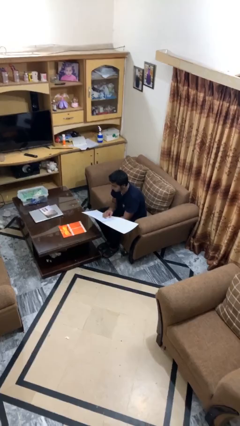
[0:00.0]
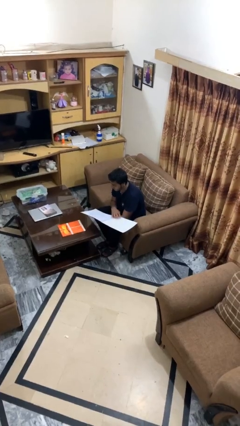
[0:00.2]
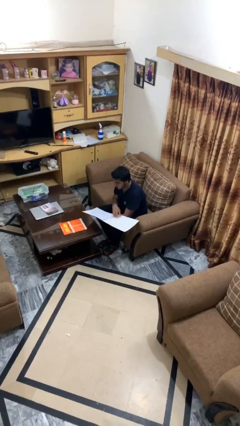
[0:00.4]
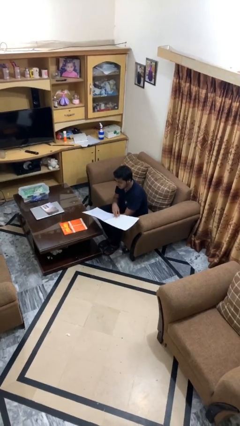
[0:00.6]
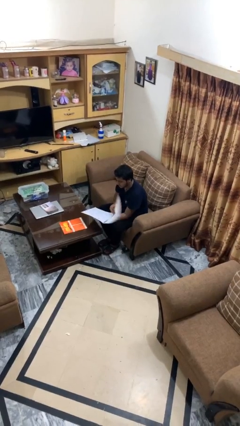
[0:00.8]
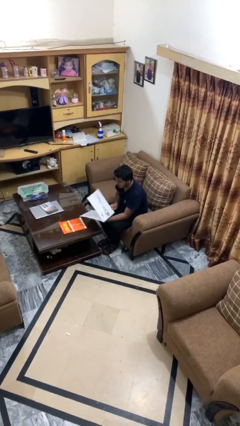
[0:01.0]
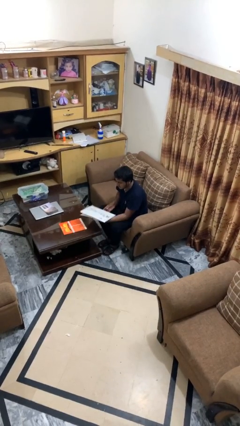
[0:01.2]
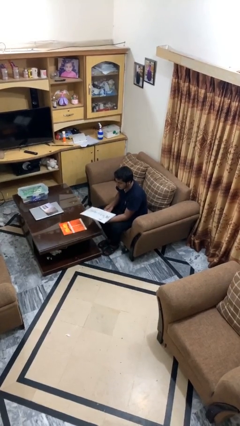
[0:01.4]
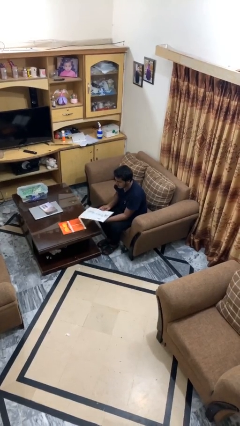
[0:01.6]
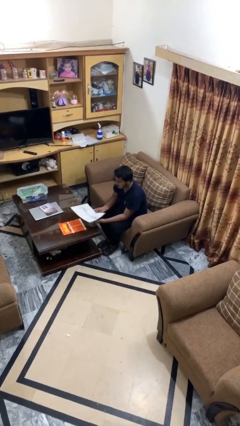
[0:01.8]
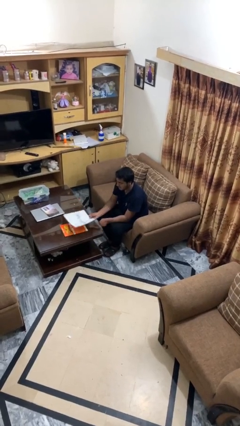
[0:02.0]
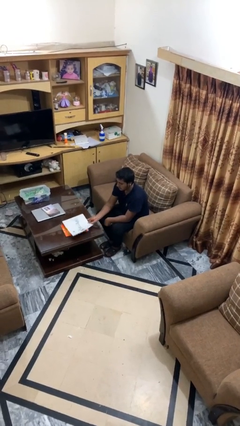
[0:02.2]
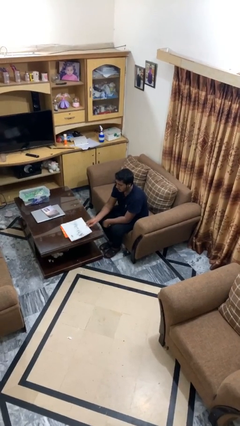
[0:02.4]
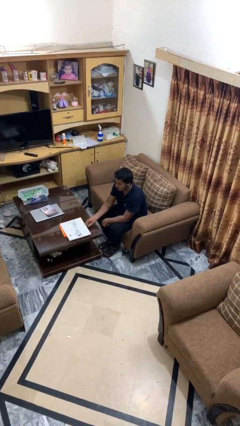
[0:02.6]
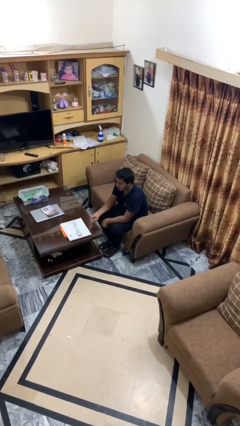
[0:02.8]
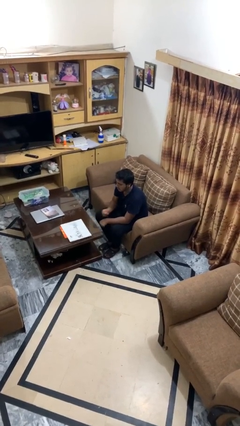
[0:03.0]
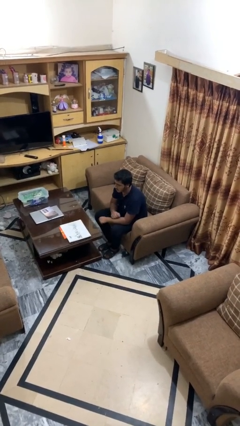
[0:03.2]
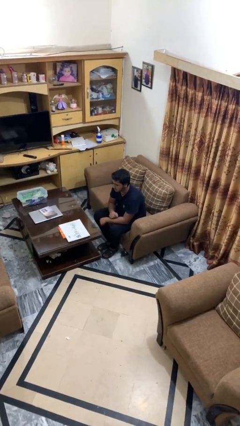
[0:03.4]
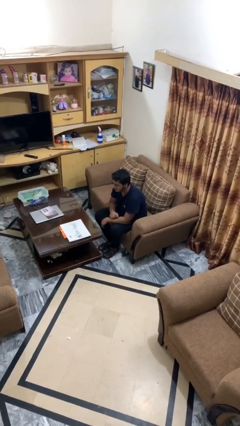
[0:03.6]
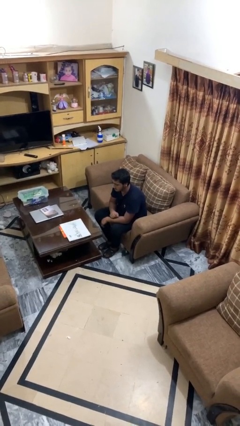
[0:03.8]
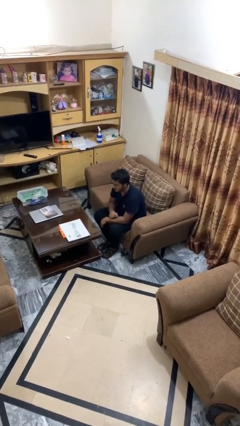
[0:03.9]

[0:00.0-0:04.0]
person puts down object on table

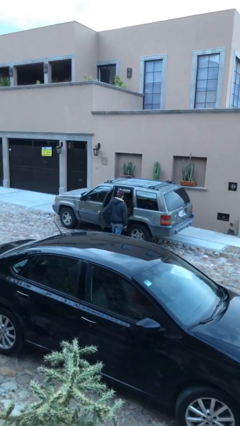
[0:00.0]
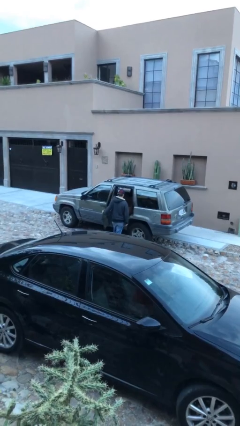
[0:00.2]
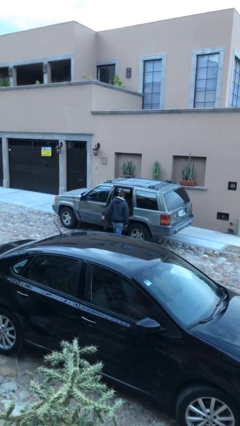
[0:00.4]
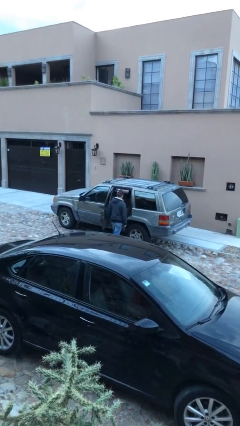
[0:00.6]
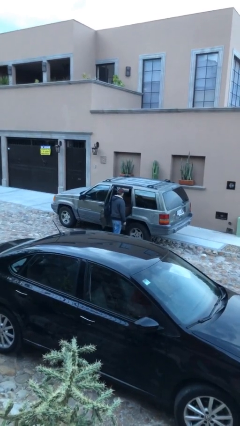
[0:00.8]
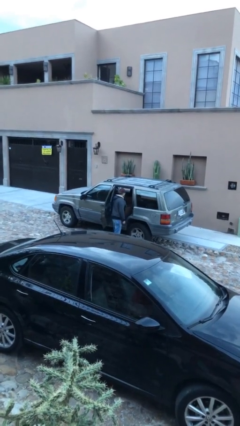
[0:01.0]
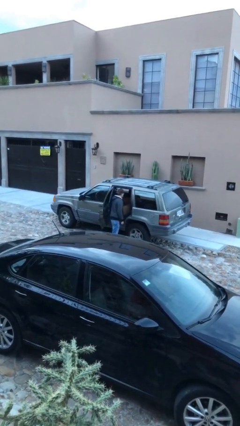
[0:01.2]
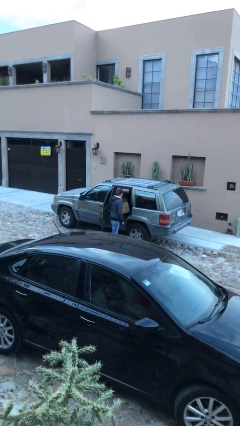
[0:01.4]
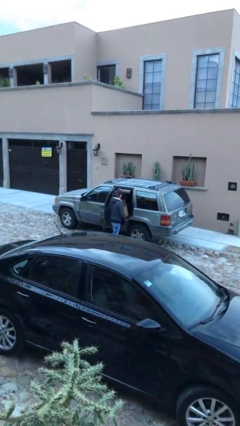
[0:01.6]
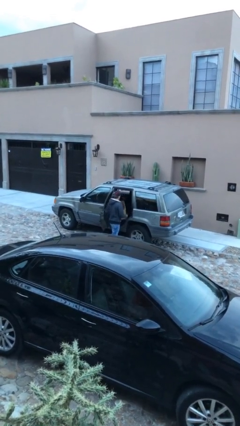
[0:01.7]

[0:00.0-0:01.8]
person unloads car

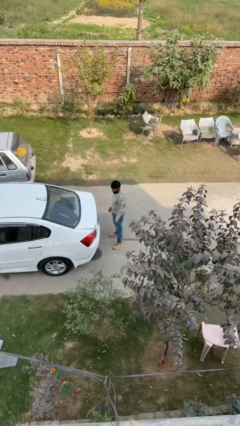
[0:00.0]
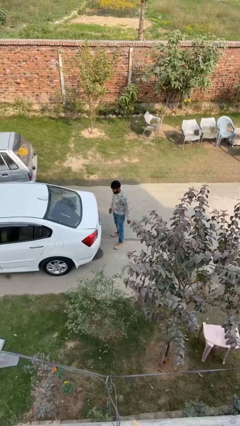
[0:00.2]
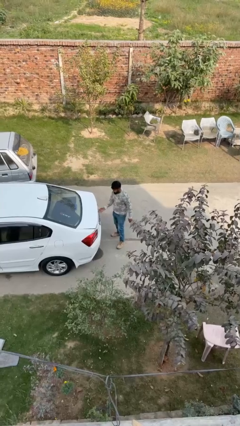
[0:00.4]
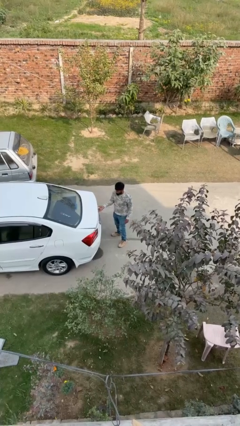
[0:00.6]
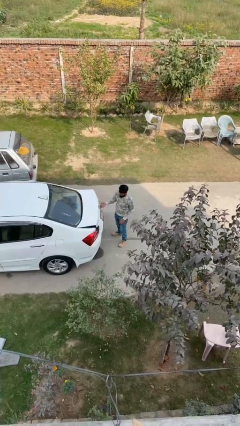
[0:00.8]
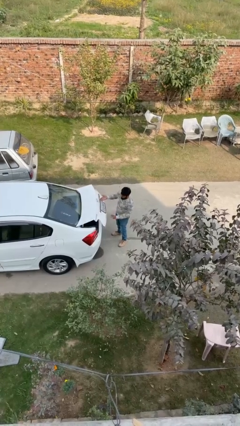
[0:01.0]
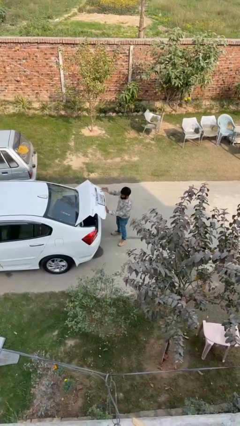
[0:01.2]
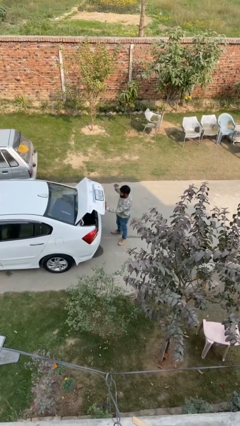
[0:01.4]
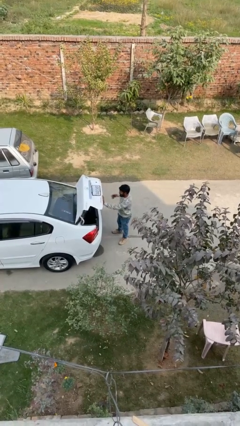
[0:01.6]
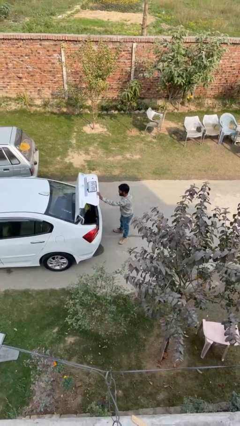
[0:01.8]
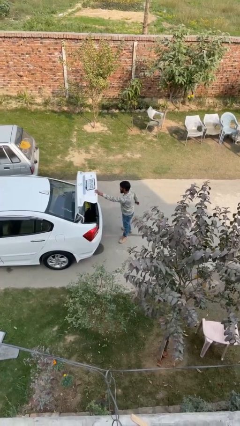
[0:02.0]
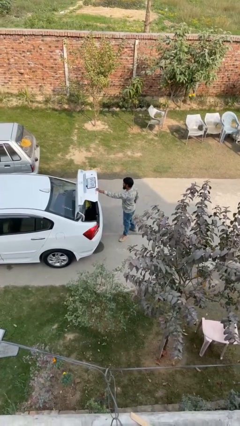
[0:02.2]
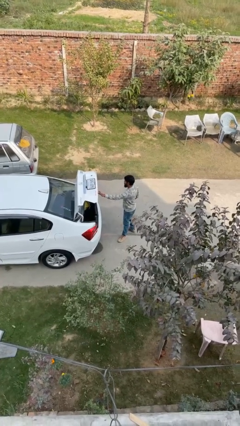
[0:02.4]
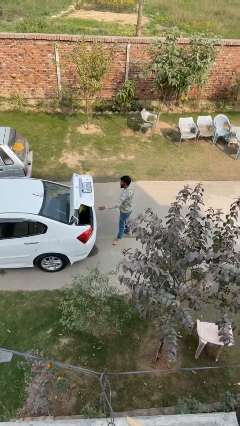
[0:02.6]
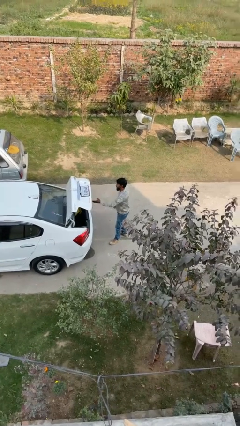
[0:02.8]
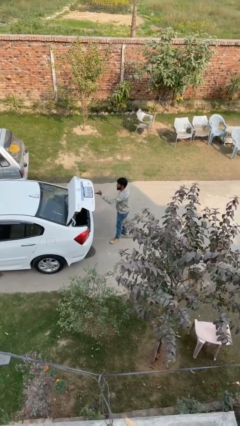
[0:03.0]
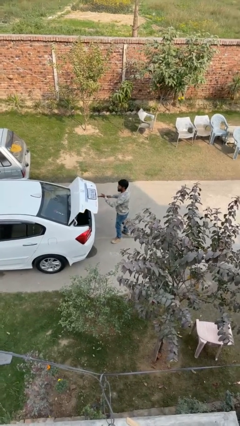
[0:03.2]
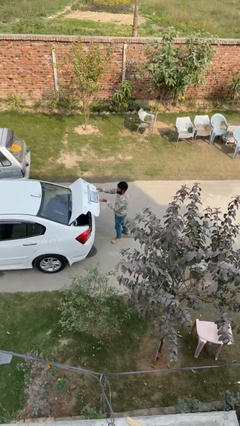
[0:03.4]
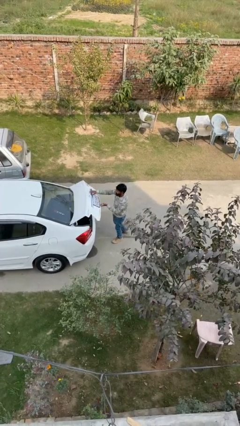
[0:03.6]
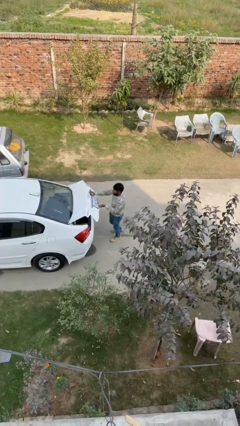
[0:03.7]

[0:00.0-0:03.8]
person opens car trunk

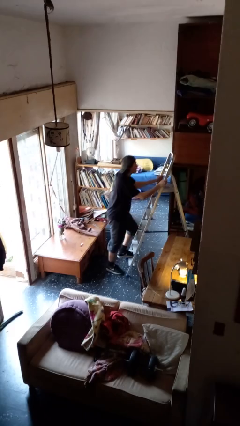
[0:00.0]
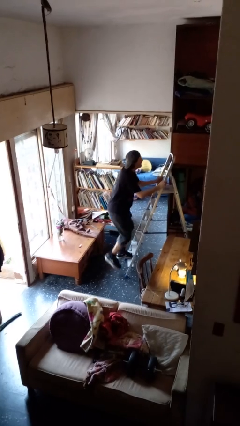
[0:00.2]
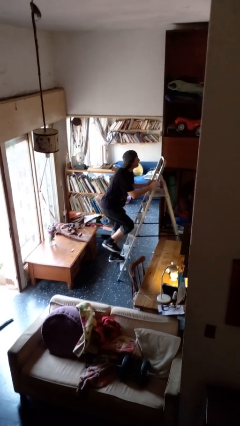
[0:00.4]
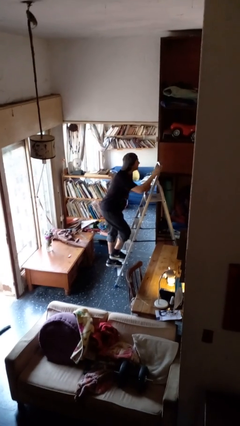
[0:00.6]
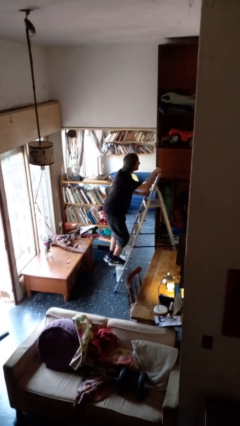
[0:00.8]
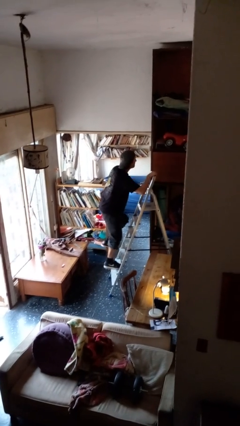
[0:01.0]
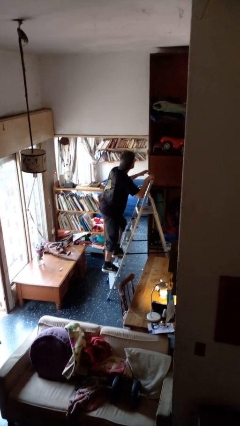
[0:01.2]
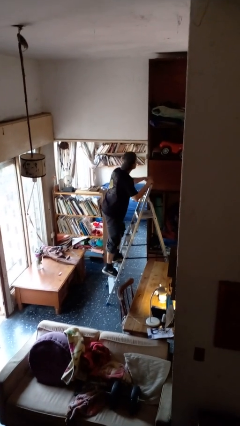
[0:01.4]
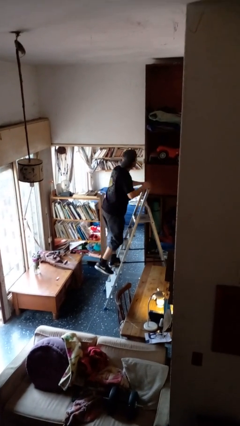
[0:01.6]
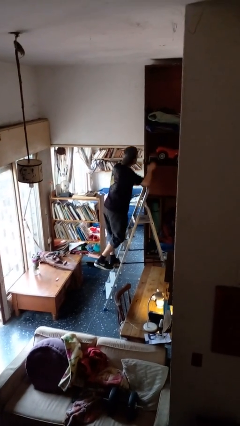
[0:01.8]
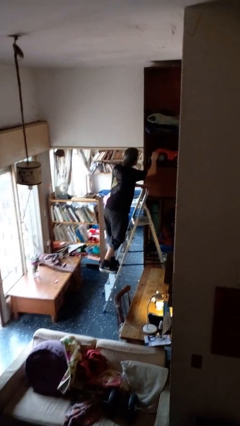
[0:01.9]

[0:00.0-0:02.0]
person climbs up ladder

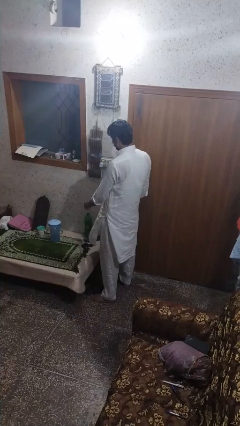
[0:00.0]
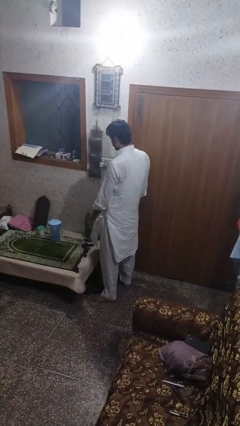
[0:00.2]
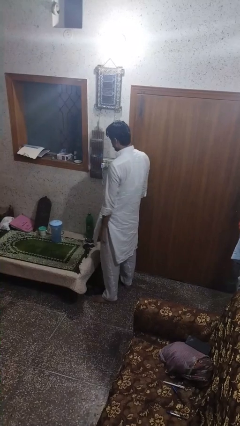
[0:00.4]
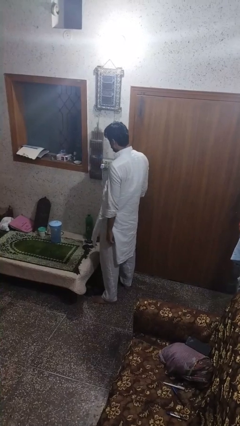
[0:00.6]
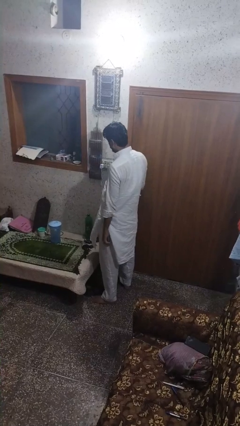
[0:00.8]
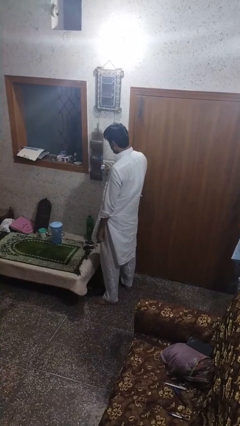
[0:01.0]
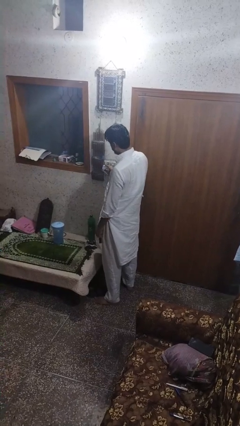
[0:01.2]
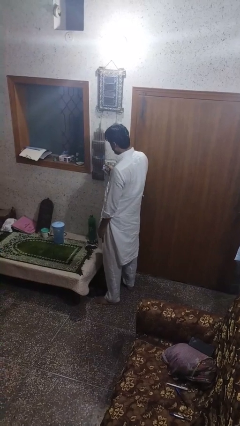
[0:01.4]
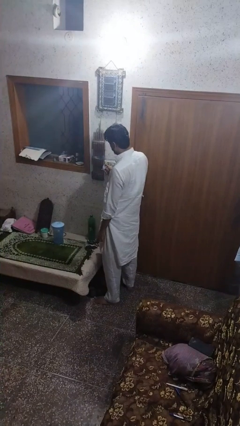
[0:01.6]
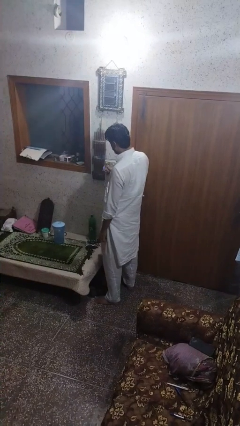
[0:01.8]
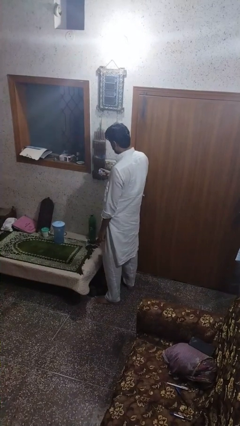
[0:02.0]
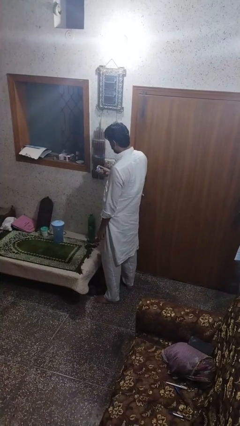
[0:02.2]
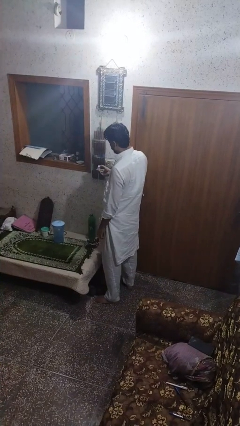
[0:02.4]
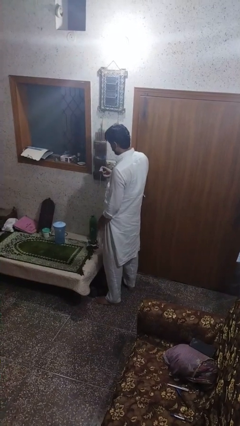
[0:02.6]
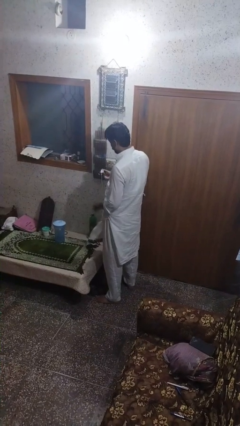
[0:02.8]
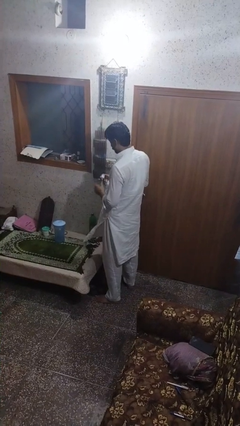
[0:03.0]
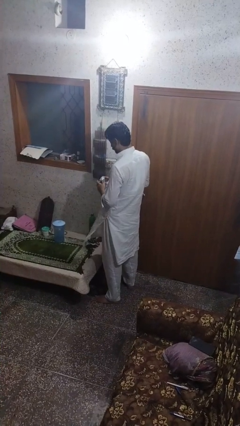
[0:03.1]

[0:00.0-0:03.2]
person unplugs from electrical socket

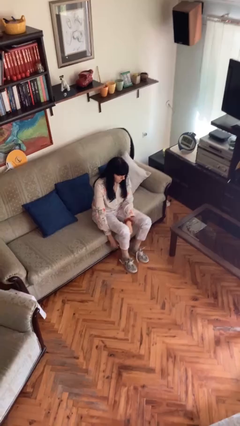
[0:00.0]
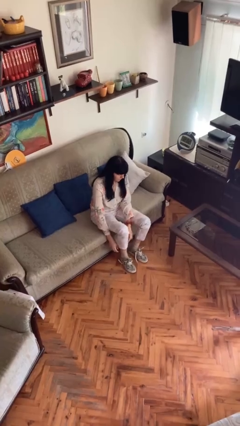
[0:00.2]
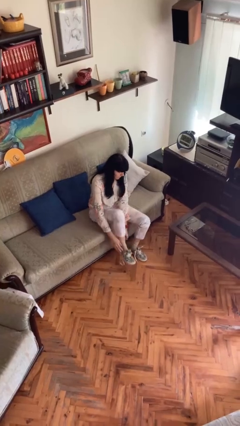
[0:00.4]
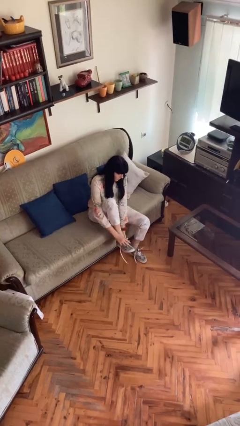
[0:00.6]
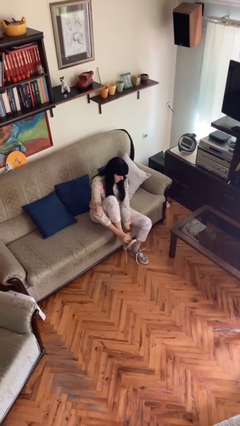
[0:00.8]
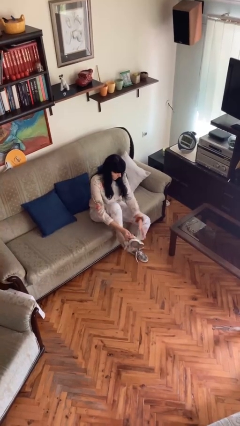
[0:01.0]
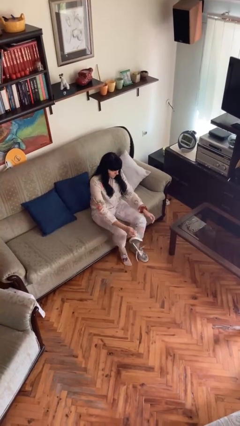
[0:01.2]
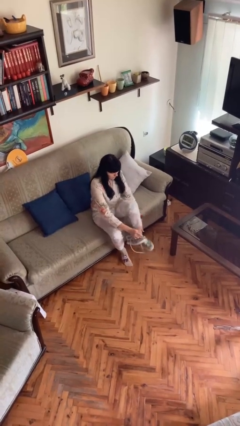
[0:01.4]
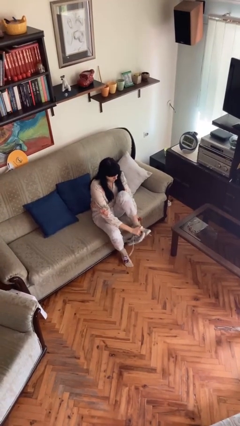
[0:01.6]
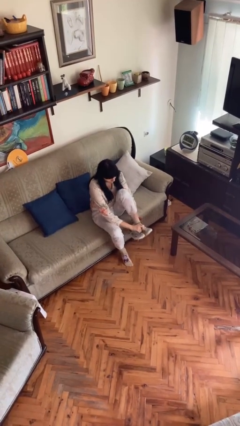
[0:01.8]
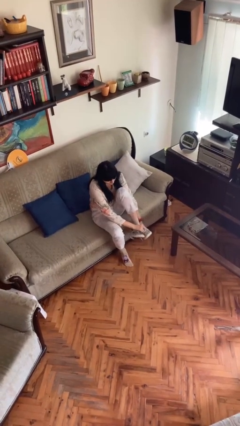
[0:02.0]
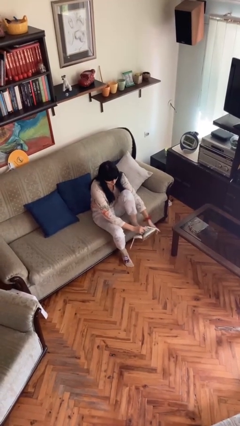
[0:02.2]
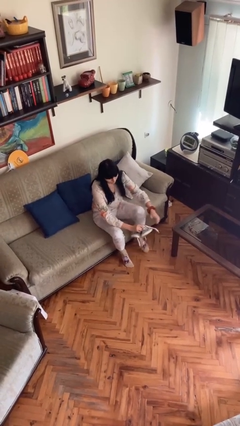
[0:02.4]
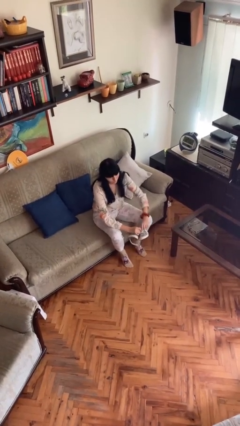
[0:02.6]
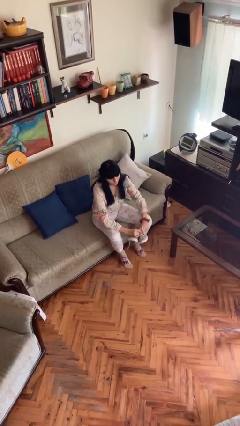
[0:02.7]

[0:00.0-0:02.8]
person takes off shoes
